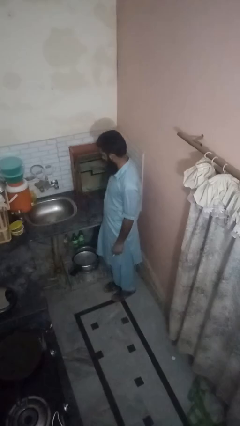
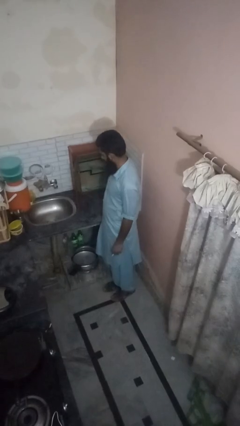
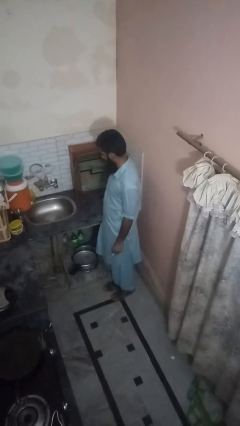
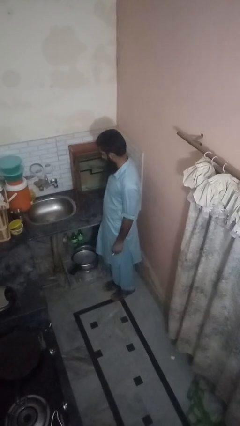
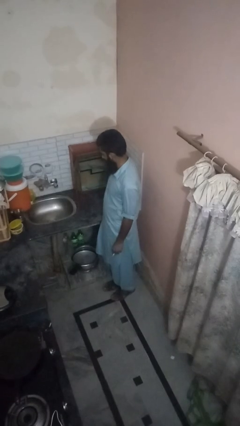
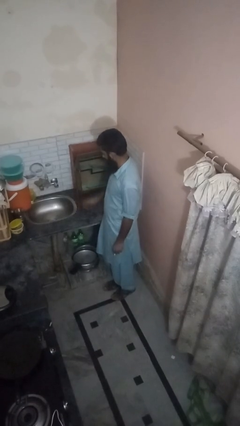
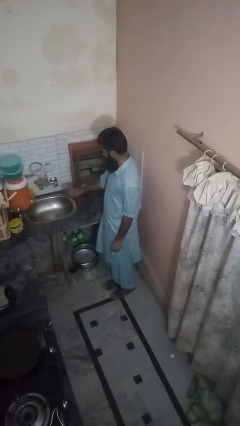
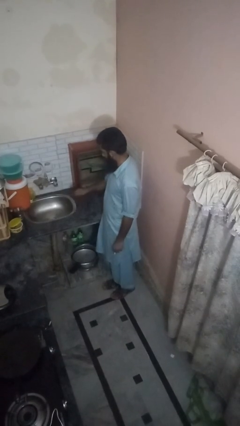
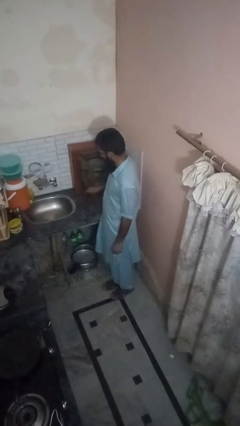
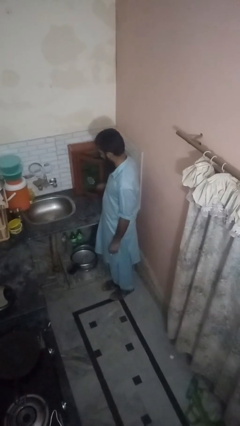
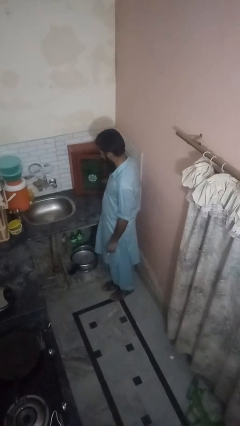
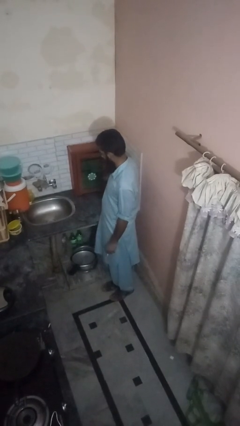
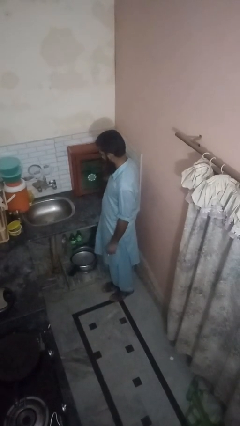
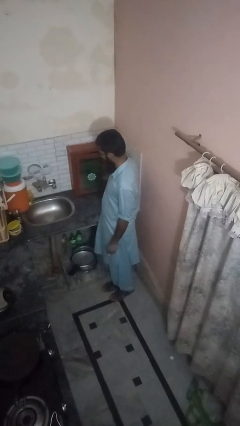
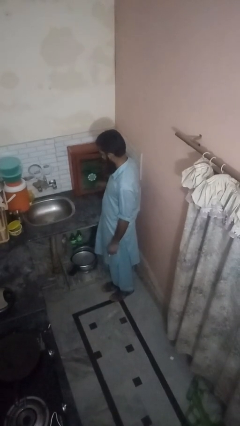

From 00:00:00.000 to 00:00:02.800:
person closes kitchen drawer

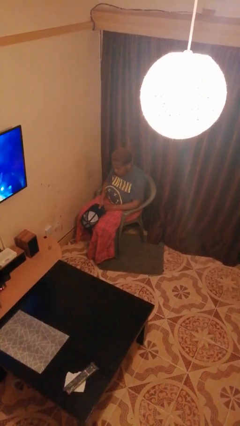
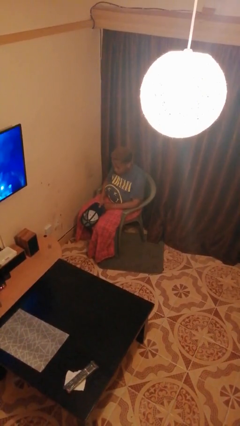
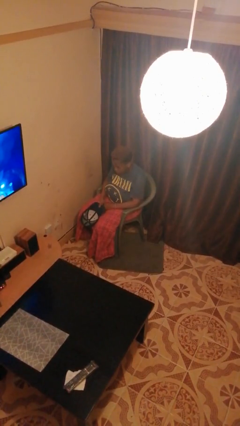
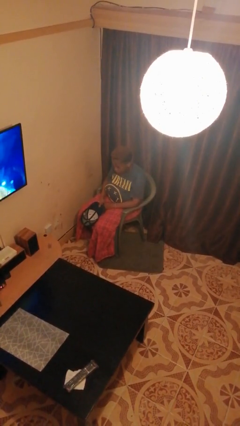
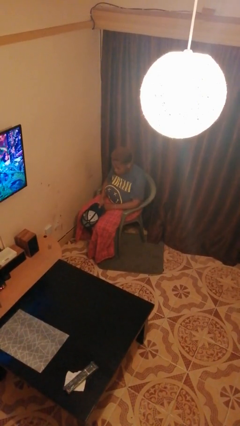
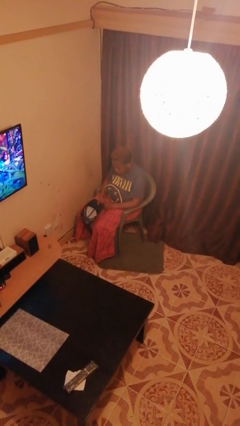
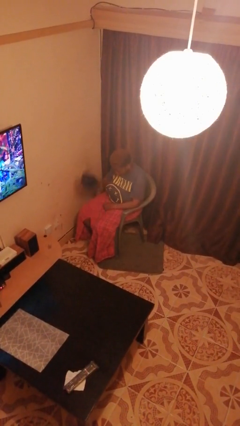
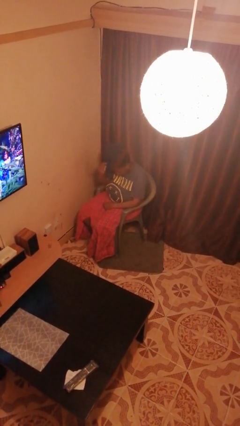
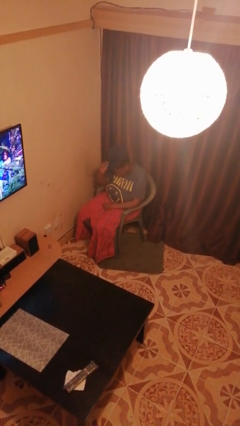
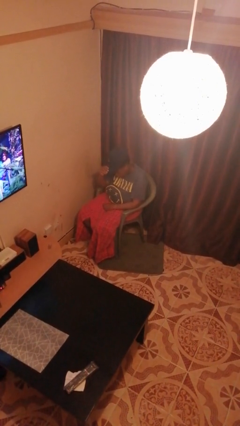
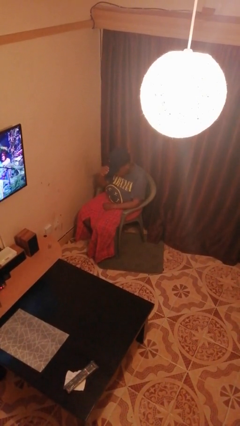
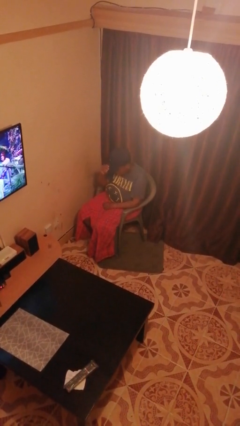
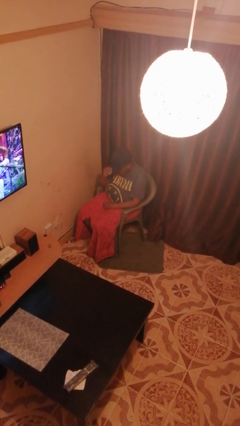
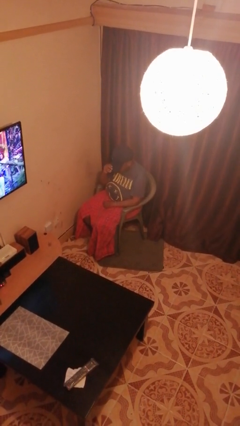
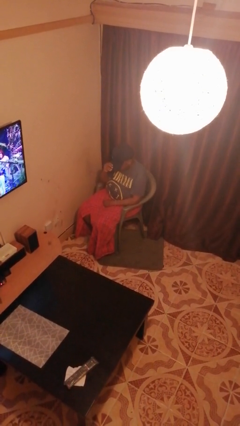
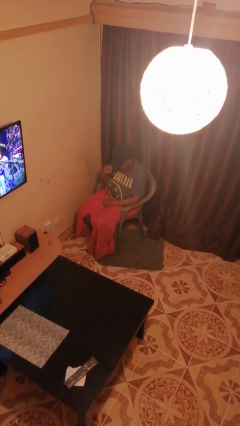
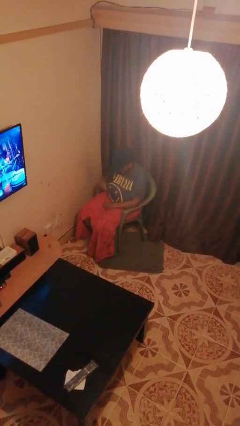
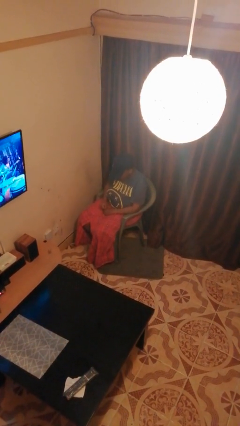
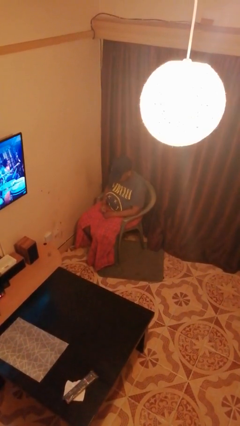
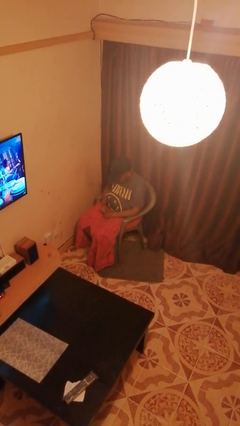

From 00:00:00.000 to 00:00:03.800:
person puts on hat

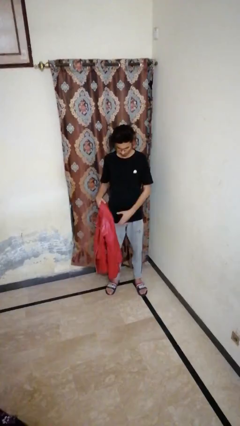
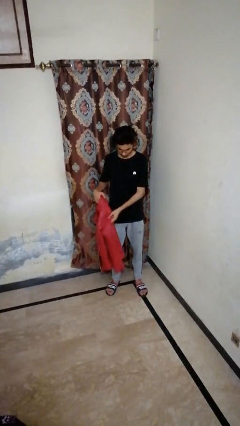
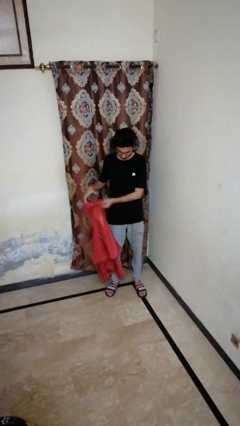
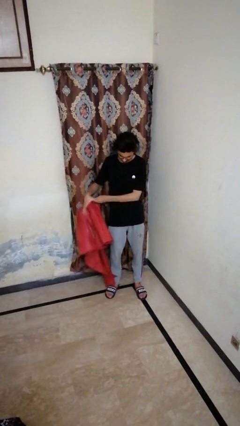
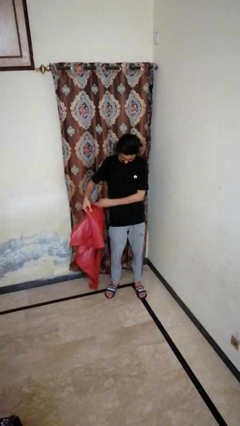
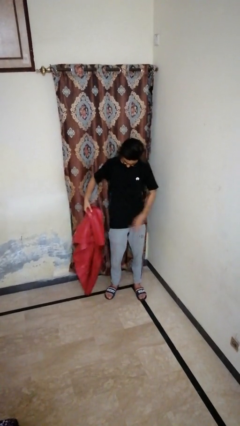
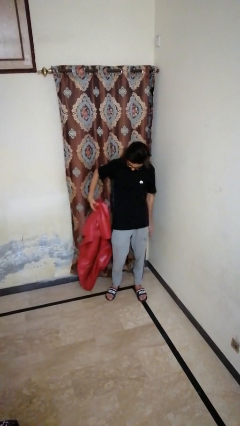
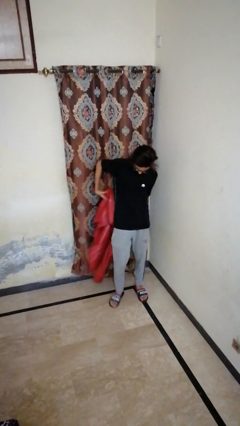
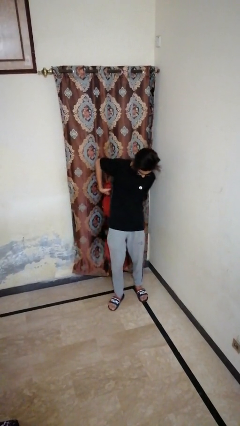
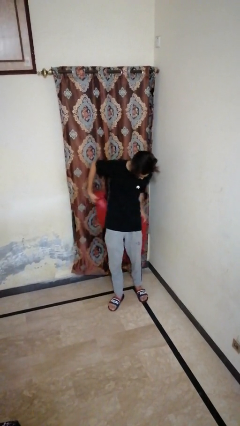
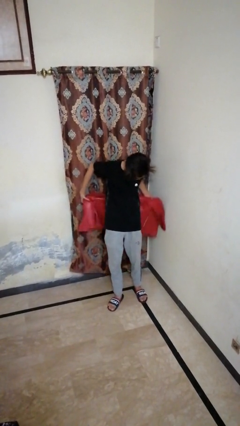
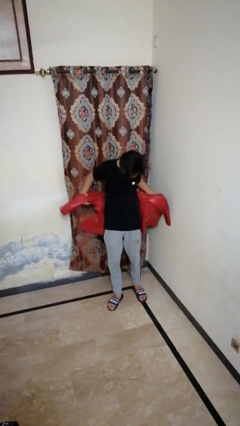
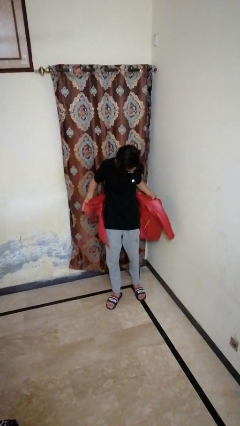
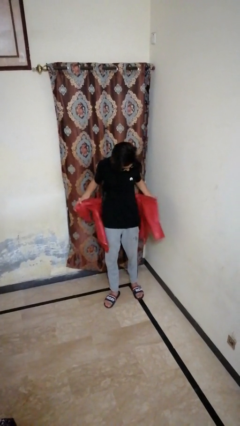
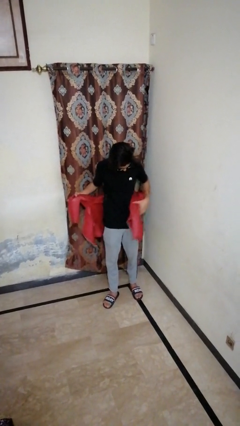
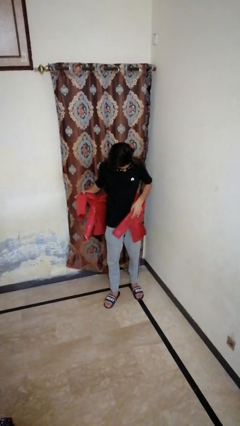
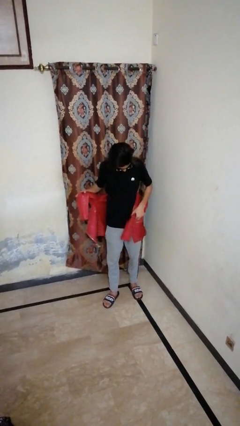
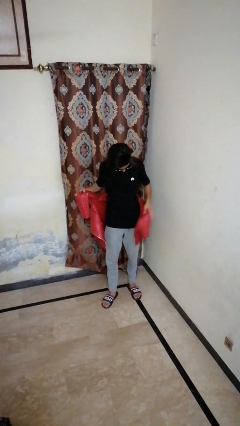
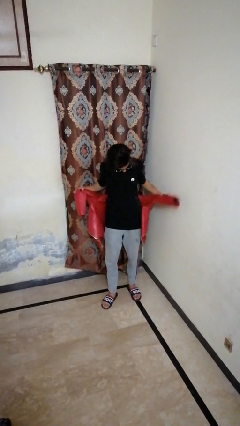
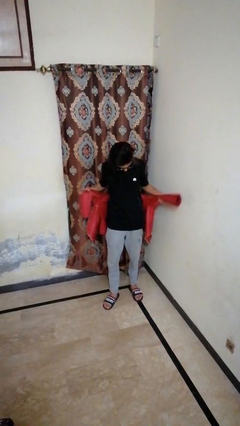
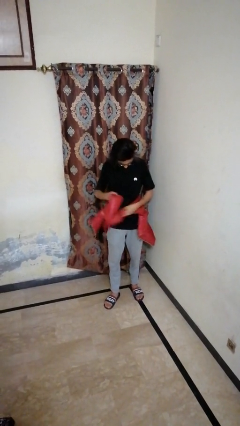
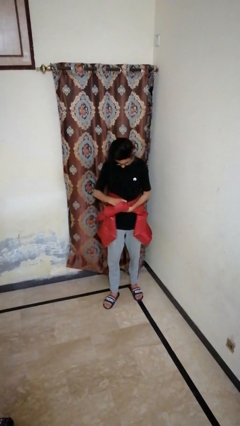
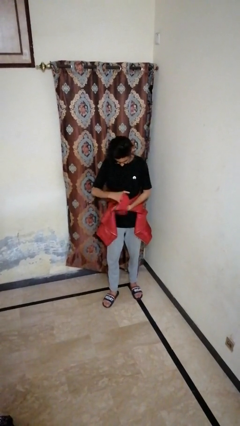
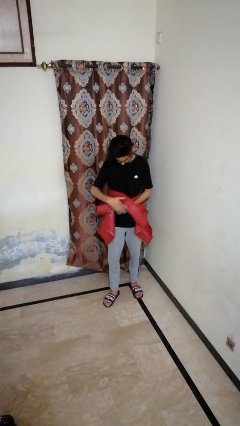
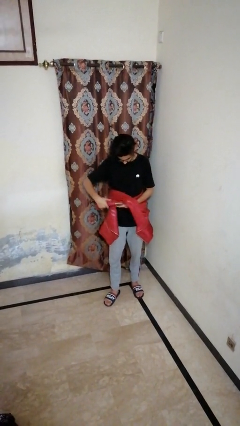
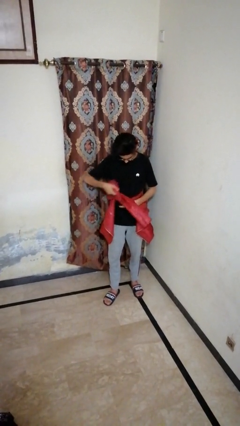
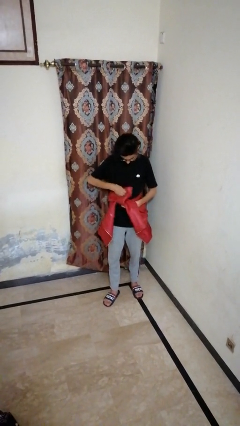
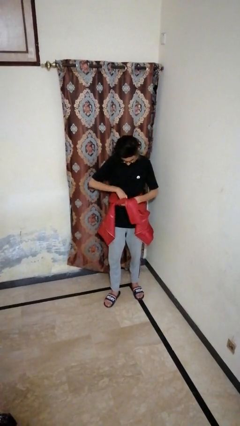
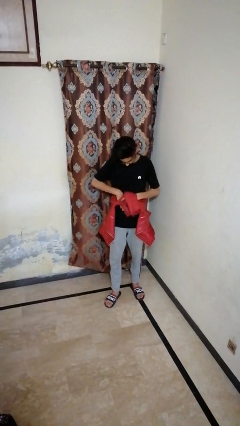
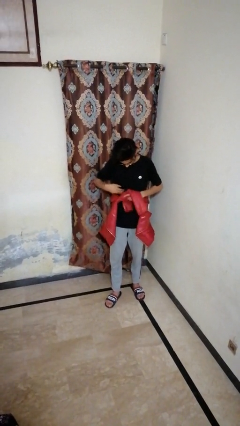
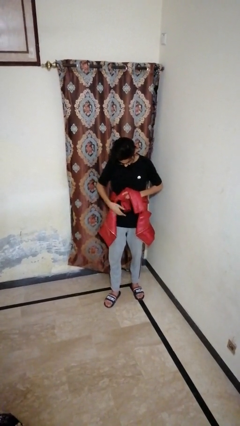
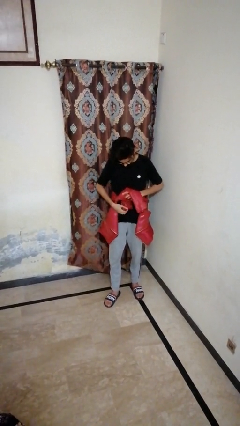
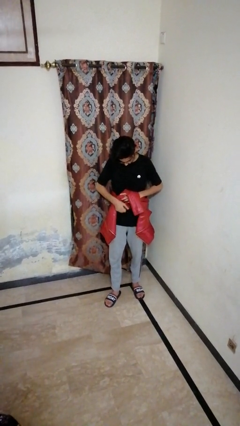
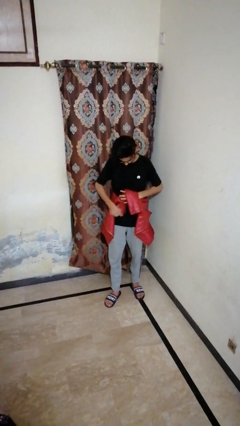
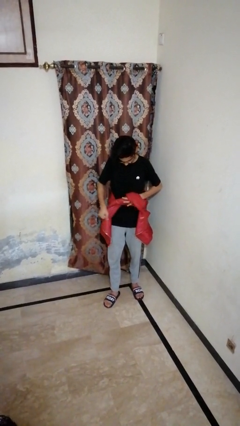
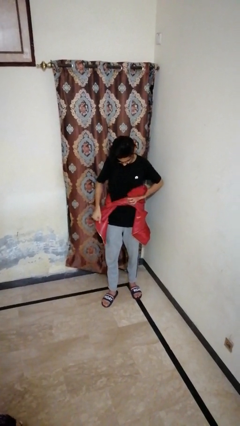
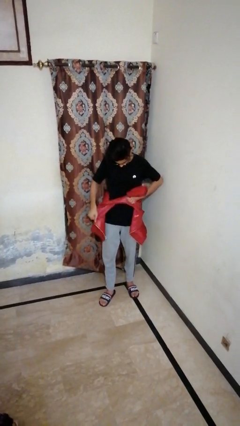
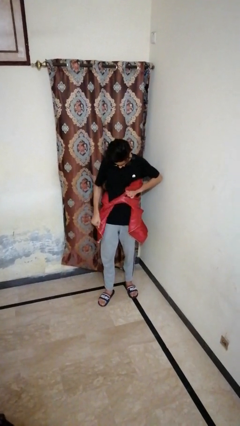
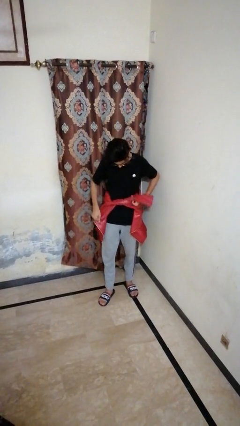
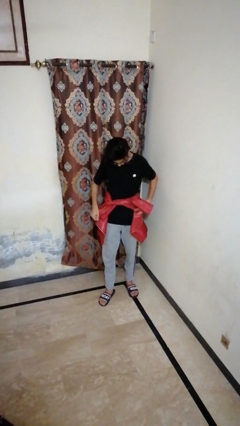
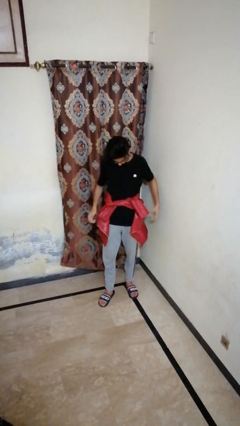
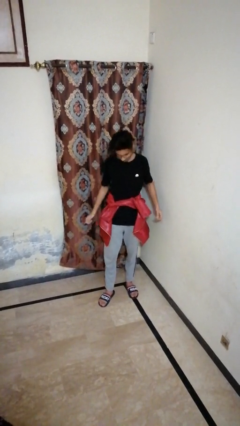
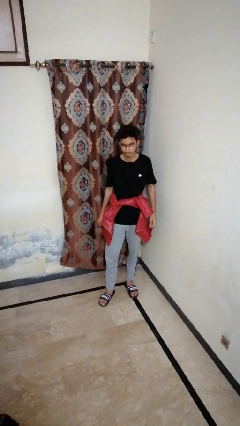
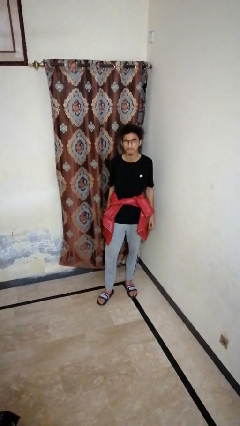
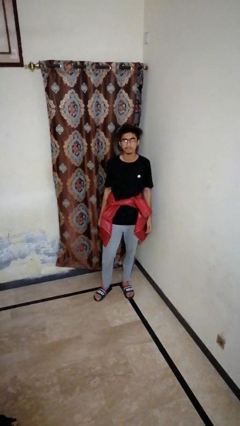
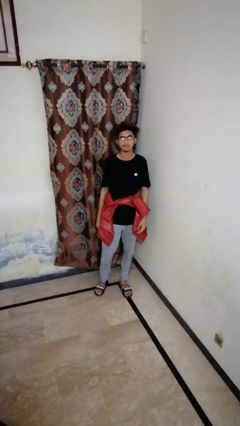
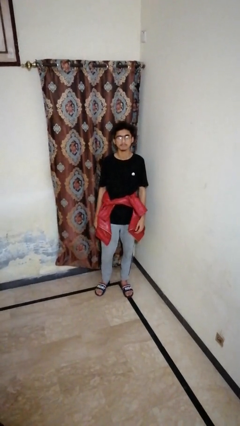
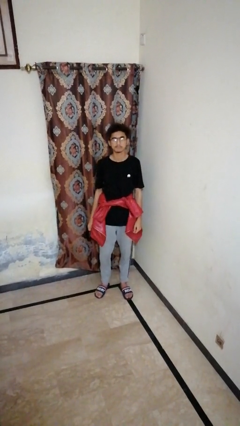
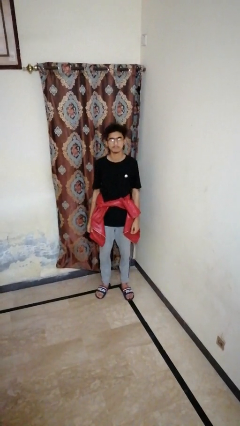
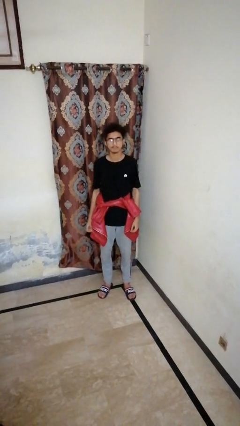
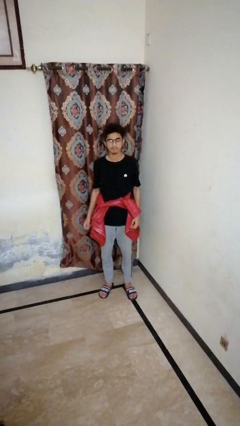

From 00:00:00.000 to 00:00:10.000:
person ties jacket around waist

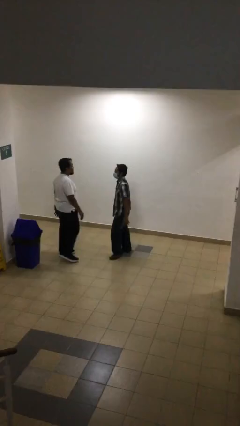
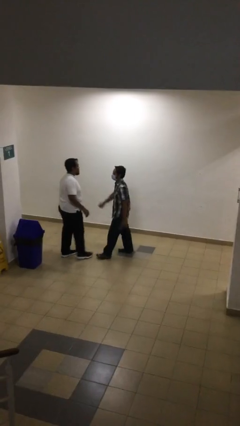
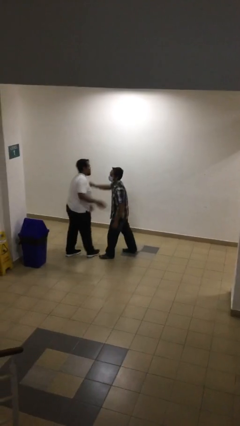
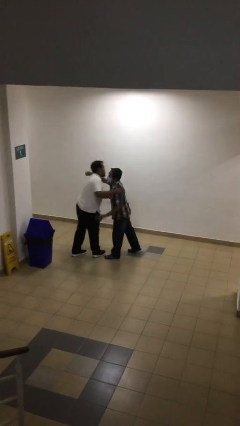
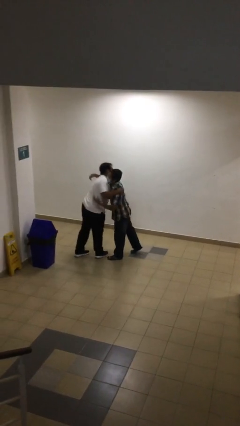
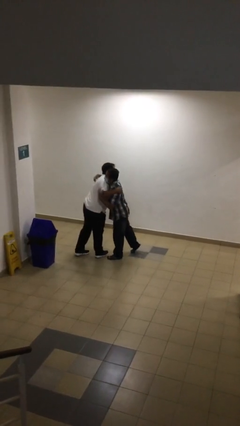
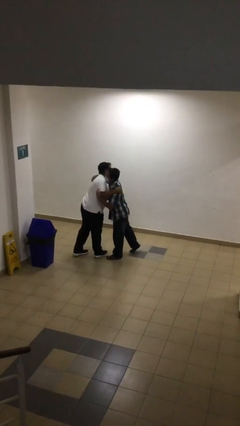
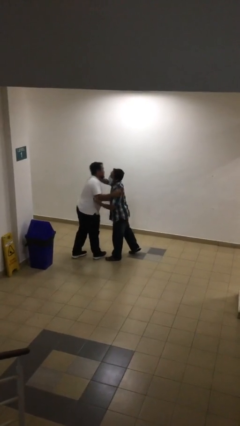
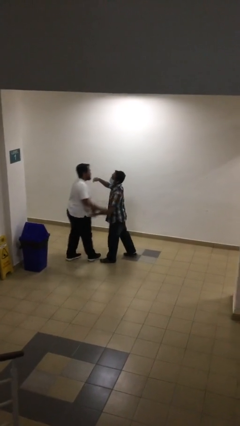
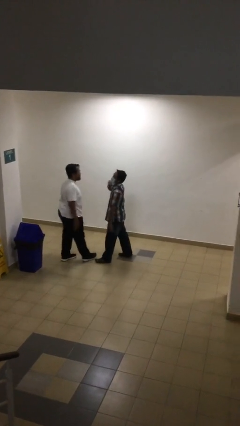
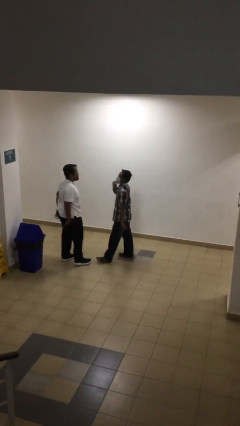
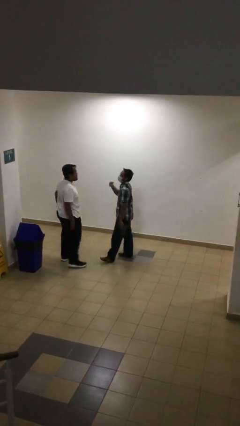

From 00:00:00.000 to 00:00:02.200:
person embraces person
